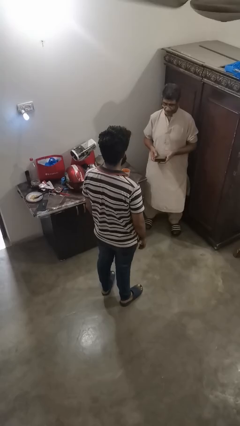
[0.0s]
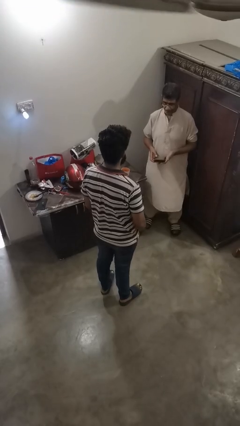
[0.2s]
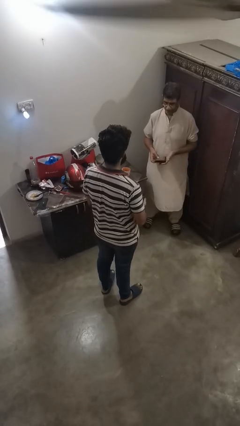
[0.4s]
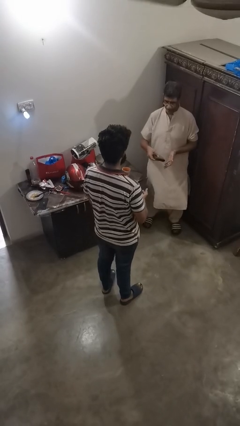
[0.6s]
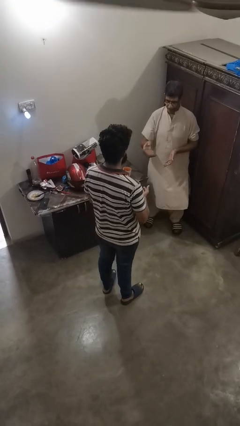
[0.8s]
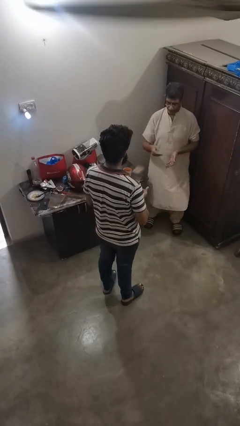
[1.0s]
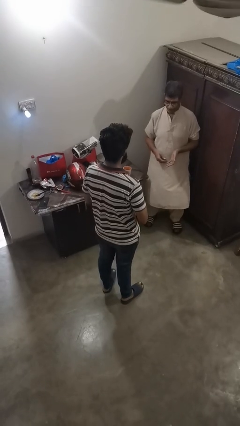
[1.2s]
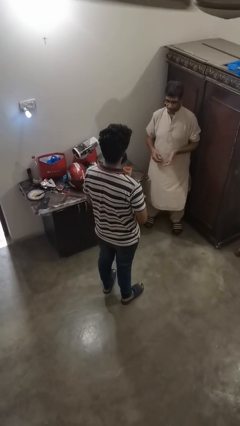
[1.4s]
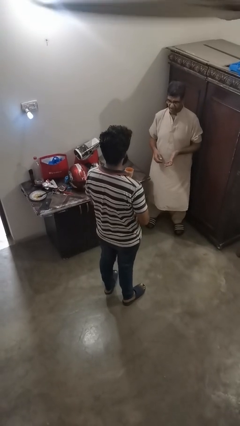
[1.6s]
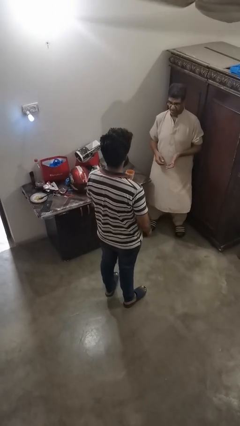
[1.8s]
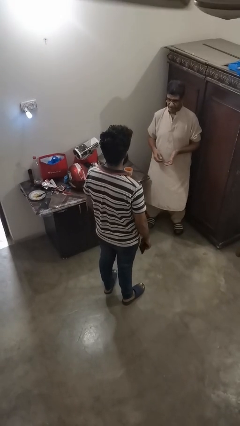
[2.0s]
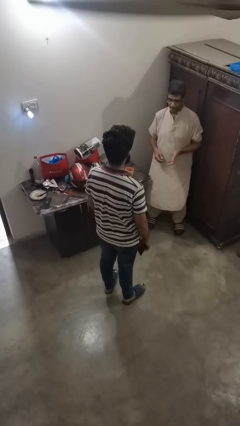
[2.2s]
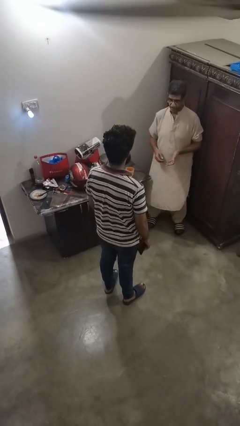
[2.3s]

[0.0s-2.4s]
person catches object from person

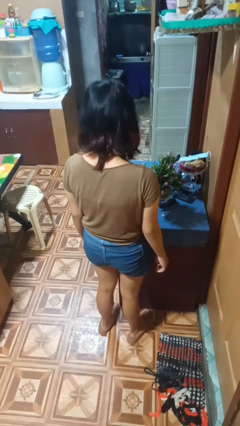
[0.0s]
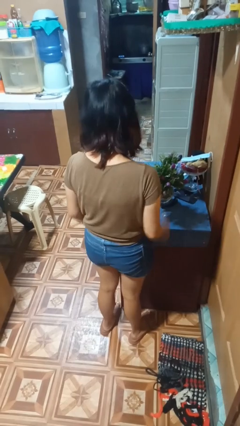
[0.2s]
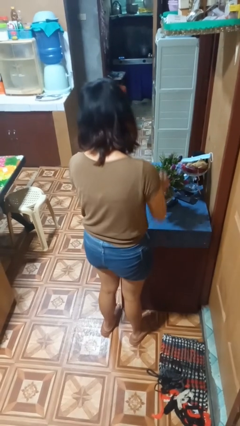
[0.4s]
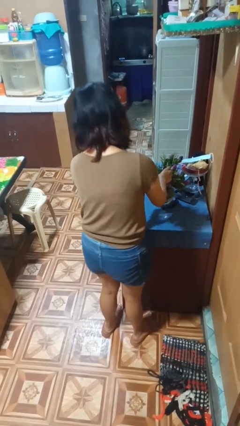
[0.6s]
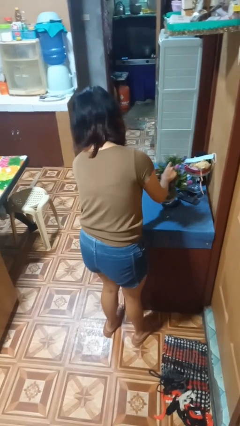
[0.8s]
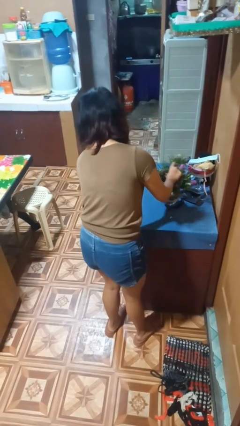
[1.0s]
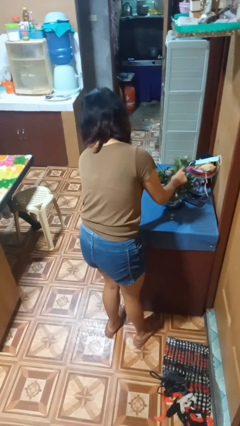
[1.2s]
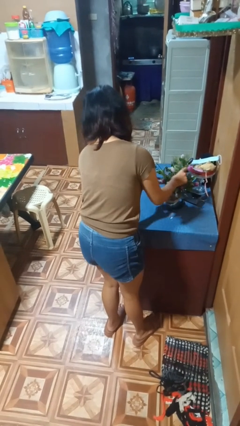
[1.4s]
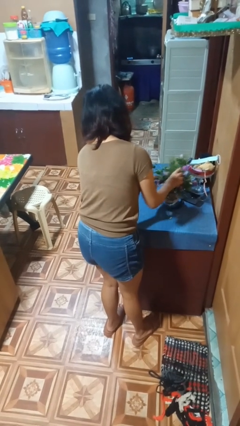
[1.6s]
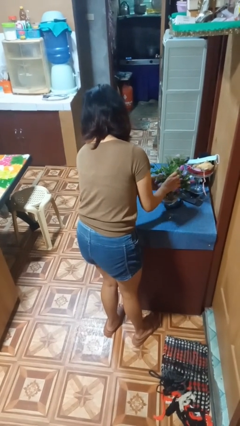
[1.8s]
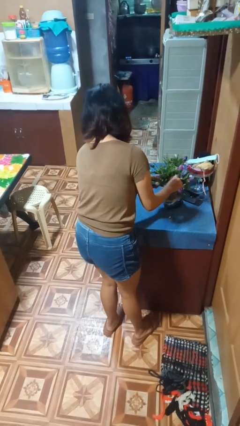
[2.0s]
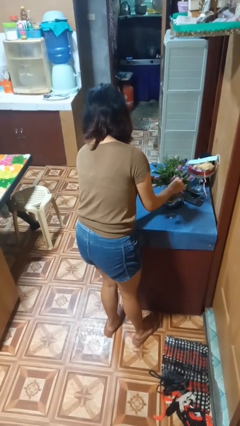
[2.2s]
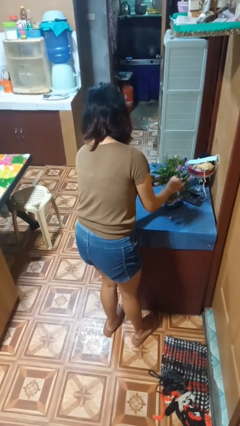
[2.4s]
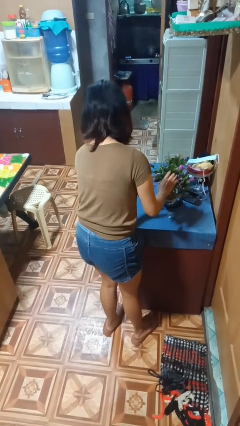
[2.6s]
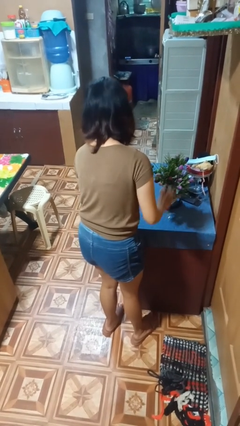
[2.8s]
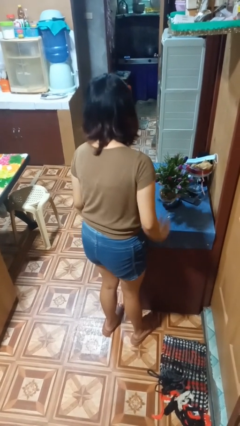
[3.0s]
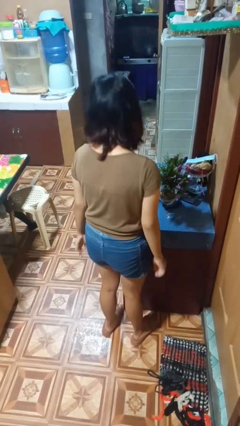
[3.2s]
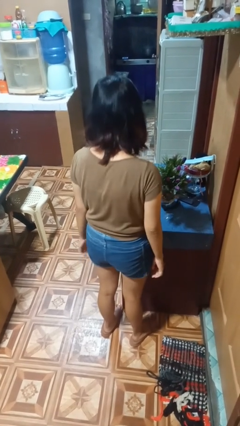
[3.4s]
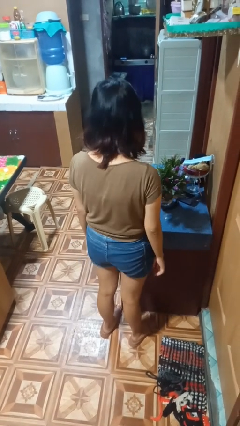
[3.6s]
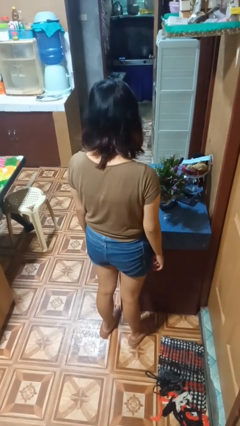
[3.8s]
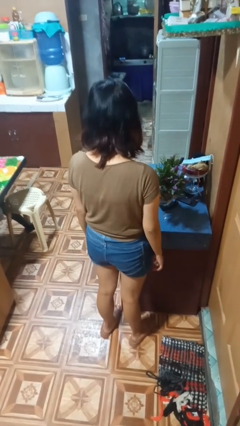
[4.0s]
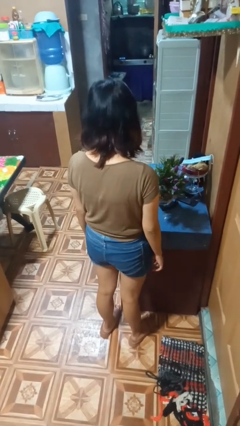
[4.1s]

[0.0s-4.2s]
person arranges flowers in vase

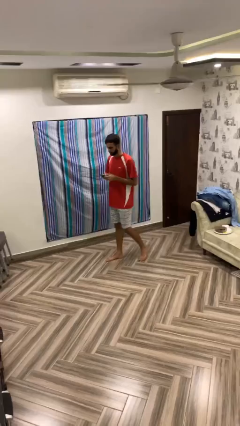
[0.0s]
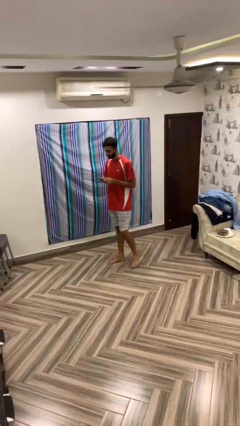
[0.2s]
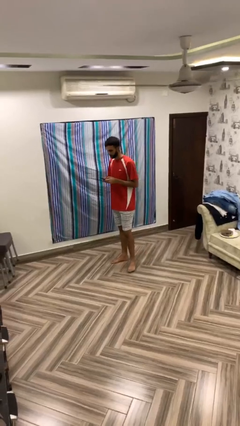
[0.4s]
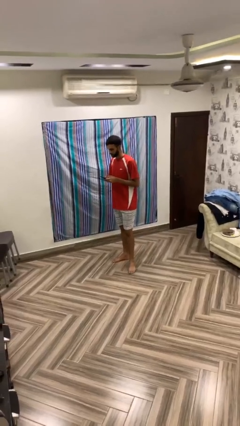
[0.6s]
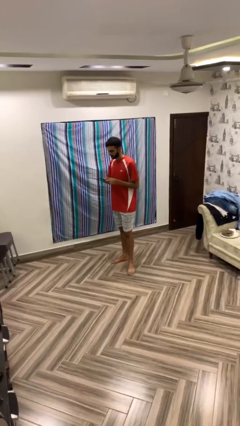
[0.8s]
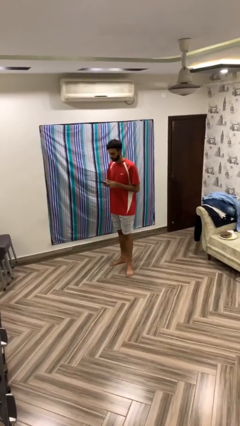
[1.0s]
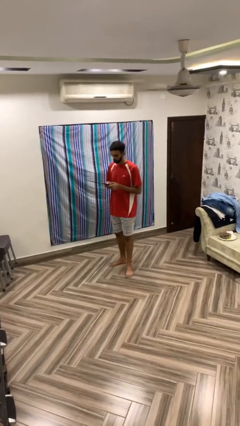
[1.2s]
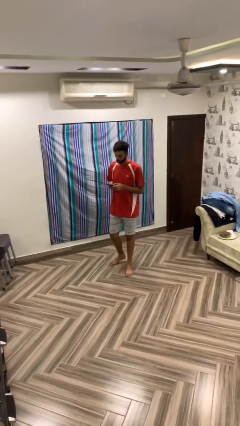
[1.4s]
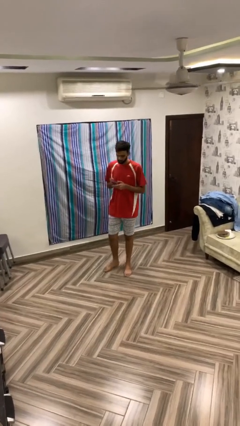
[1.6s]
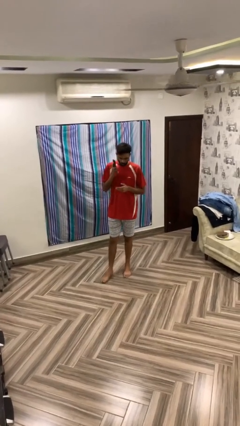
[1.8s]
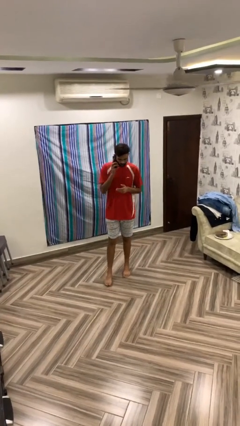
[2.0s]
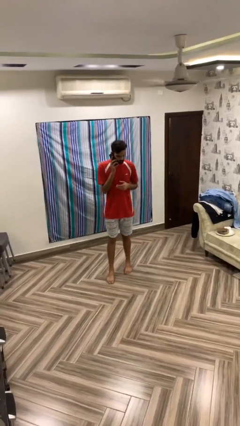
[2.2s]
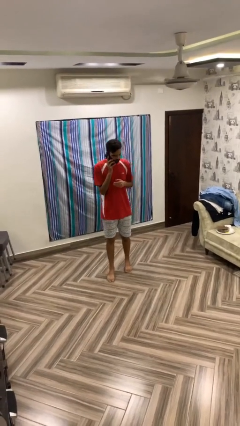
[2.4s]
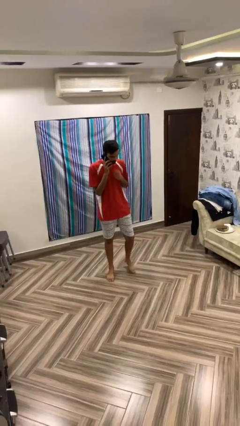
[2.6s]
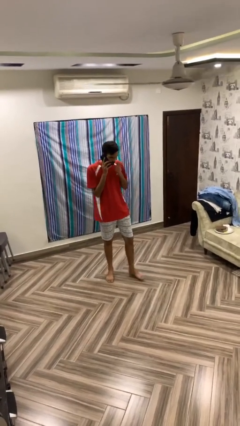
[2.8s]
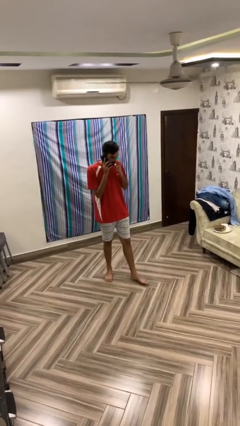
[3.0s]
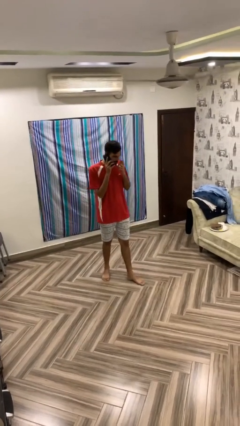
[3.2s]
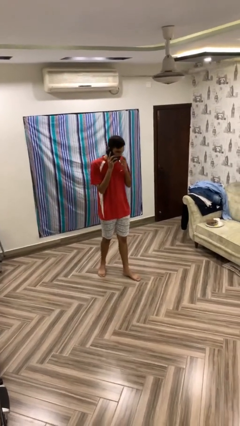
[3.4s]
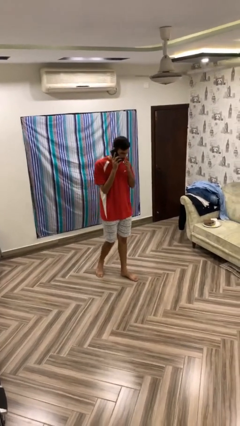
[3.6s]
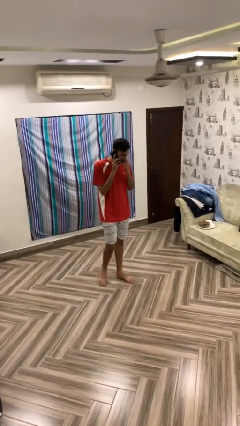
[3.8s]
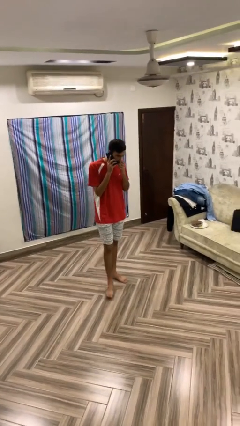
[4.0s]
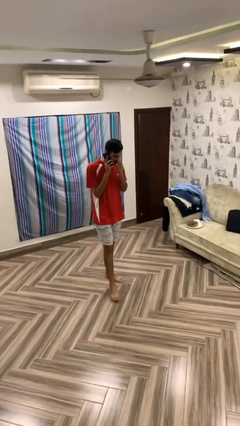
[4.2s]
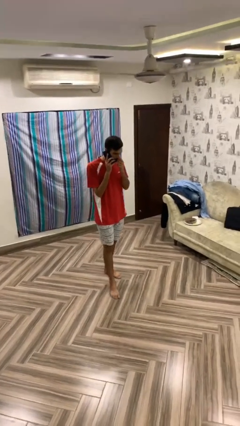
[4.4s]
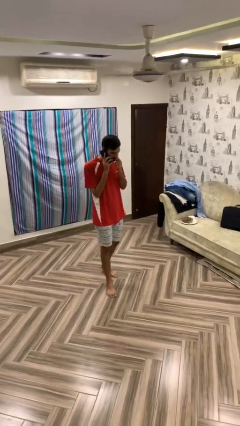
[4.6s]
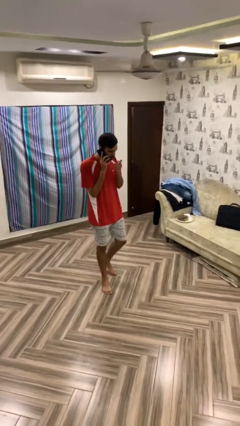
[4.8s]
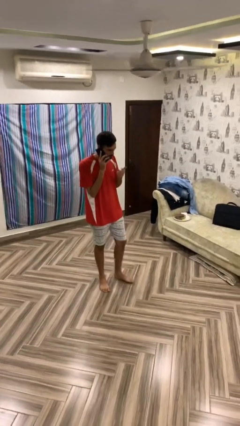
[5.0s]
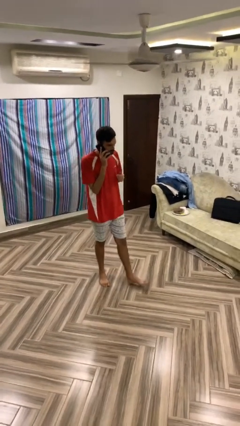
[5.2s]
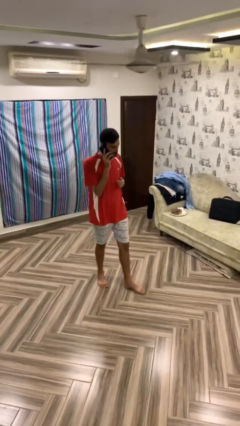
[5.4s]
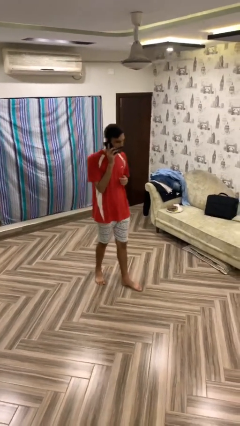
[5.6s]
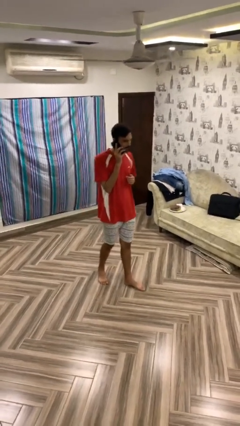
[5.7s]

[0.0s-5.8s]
person talks on phone

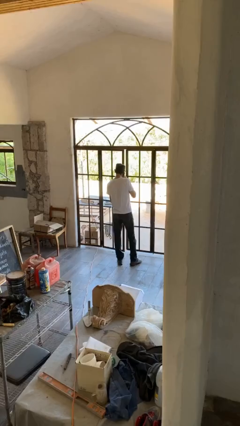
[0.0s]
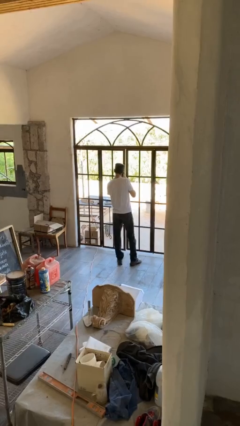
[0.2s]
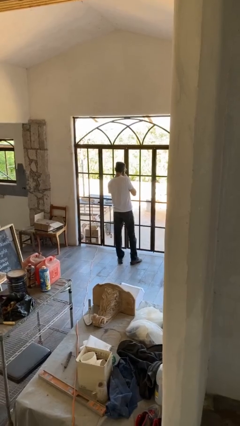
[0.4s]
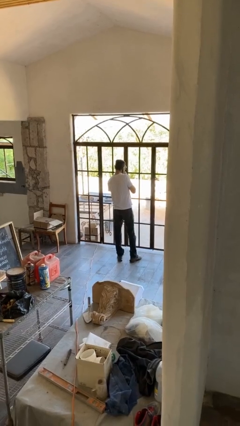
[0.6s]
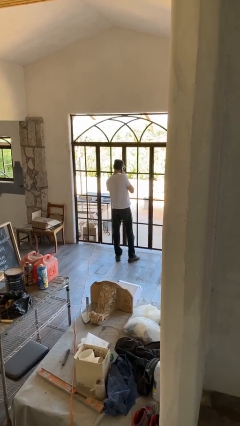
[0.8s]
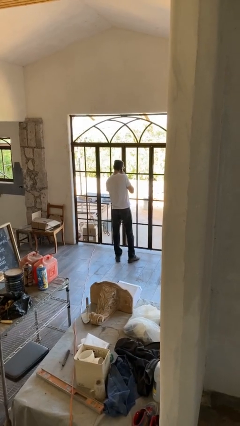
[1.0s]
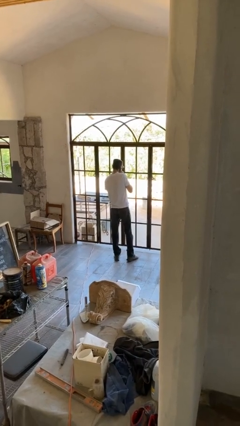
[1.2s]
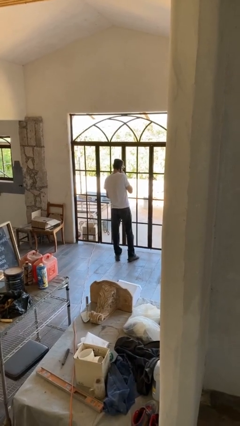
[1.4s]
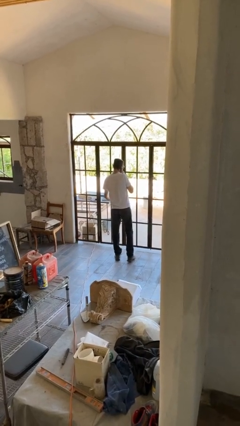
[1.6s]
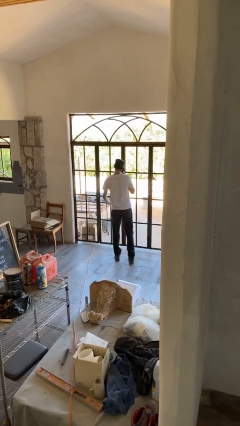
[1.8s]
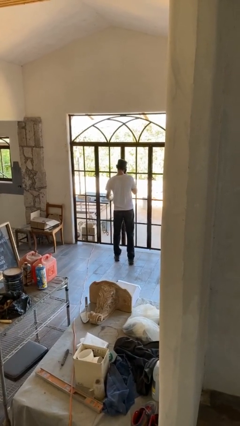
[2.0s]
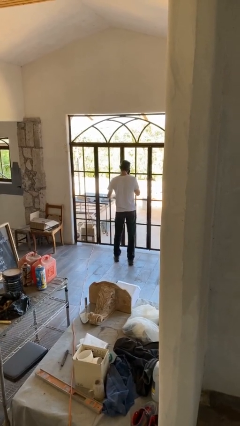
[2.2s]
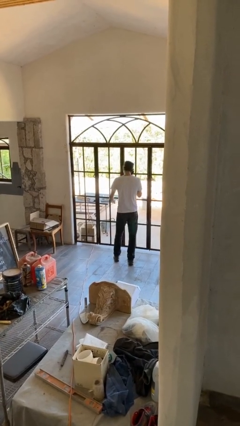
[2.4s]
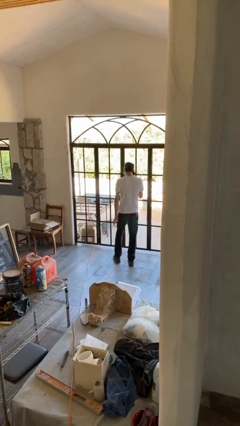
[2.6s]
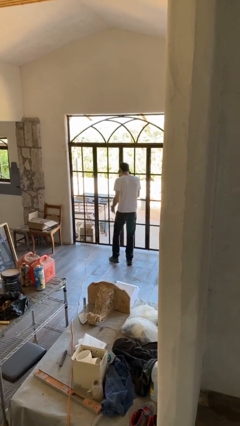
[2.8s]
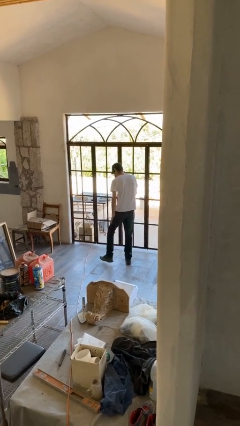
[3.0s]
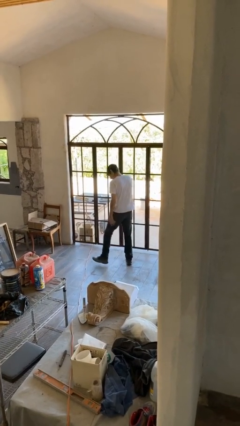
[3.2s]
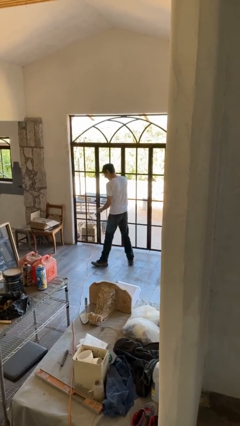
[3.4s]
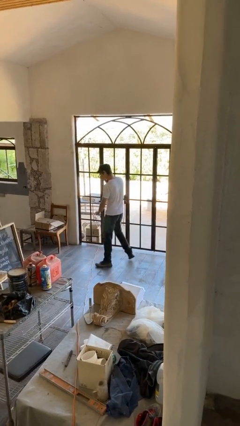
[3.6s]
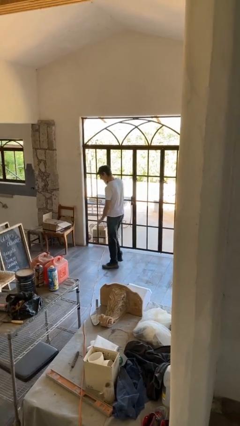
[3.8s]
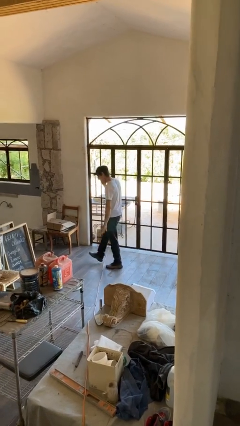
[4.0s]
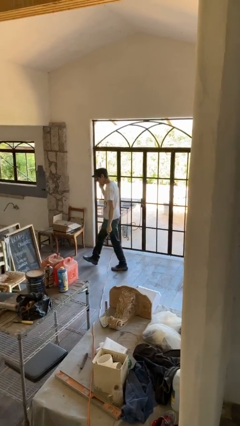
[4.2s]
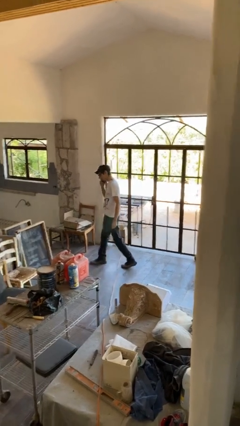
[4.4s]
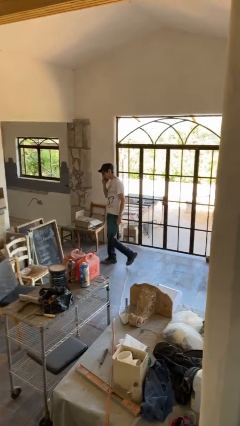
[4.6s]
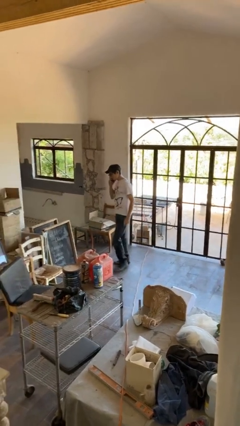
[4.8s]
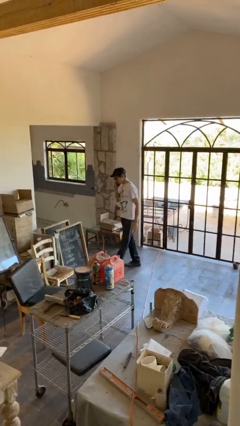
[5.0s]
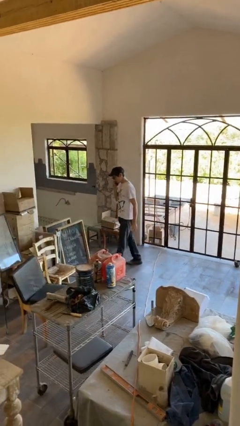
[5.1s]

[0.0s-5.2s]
person closes facility door

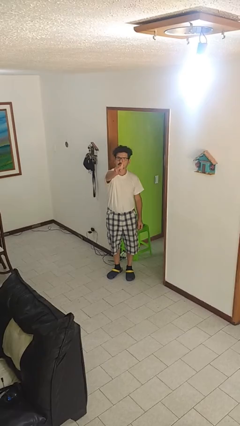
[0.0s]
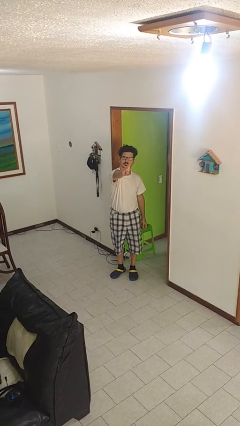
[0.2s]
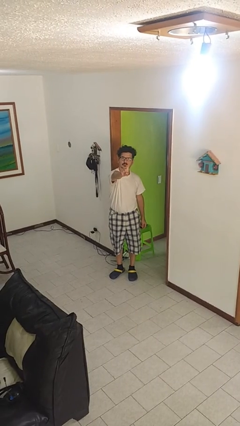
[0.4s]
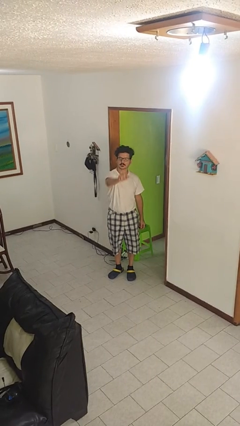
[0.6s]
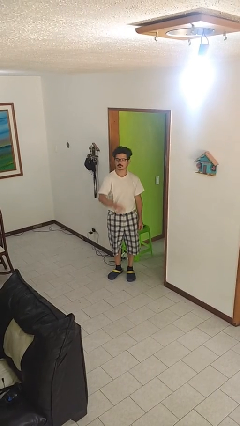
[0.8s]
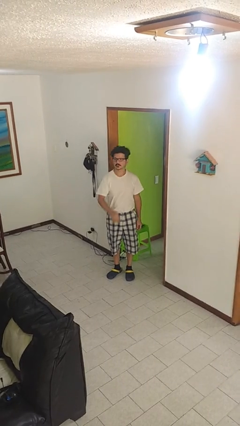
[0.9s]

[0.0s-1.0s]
person gestures number one
